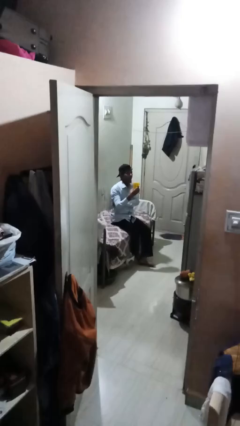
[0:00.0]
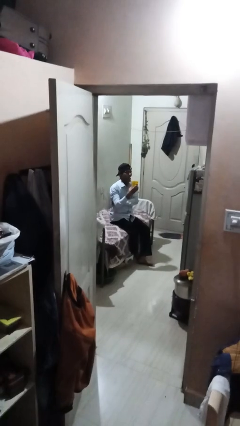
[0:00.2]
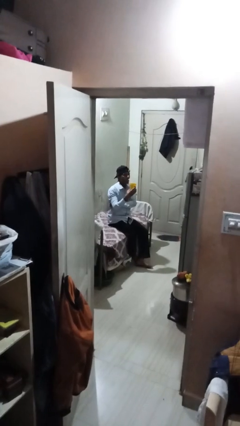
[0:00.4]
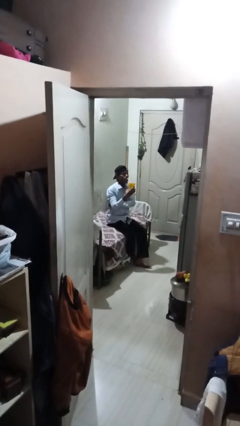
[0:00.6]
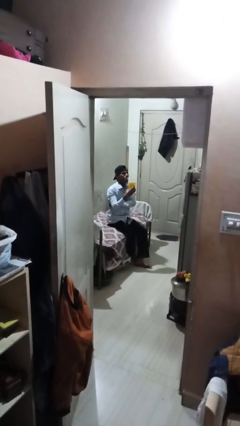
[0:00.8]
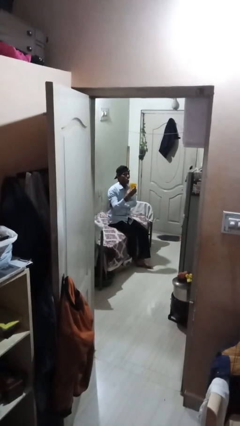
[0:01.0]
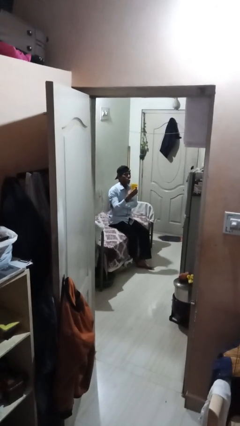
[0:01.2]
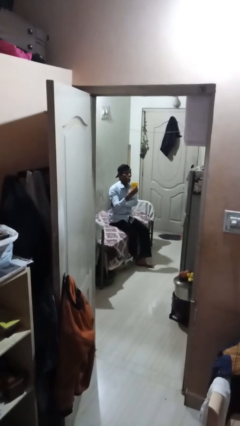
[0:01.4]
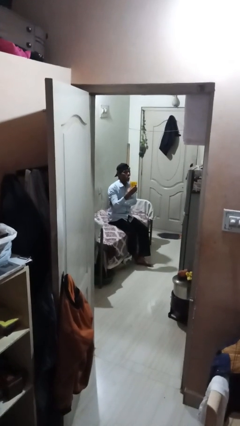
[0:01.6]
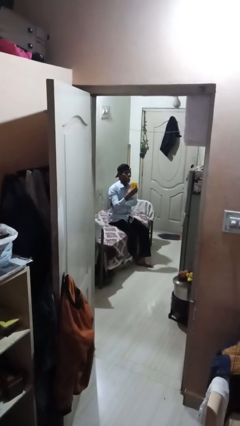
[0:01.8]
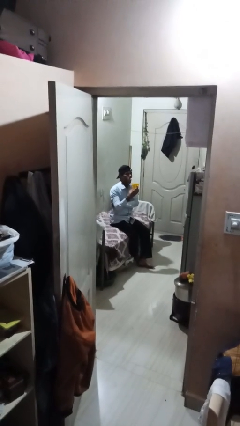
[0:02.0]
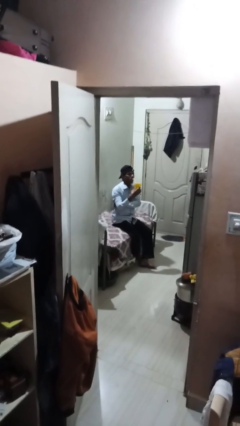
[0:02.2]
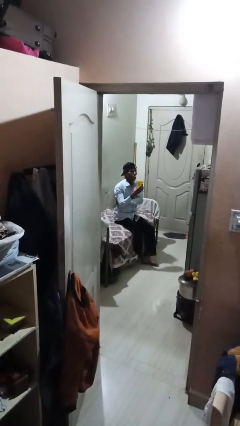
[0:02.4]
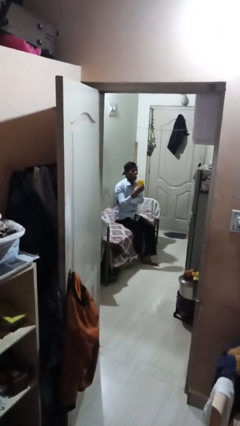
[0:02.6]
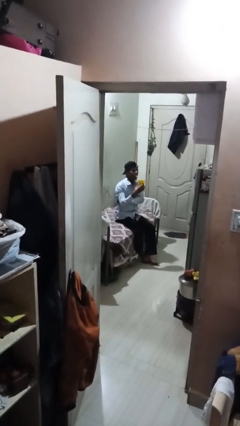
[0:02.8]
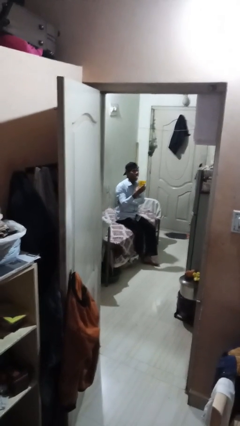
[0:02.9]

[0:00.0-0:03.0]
person drinks from straw

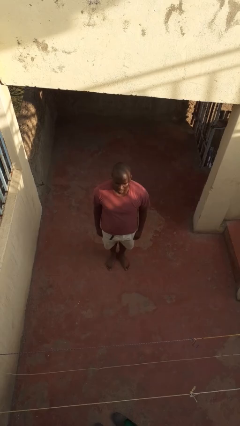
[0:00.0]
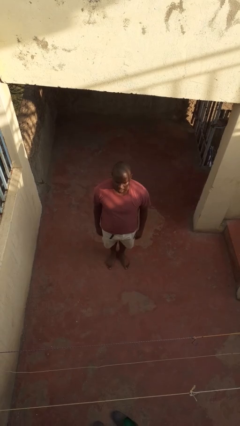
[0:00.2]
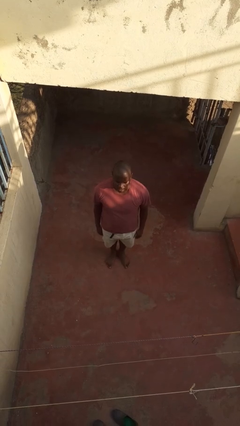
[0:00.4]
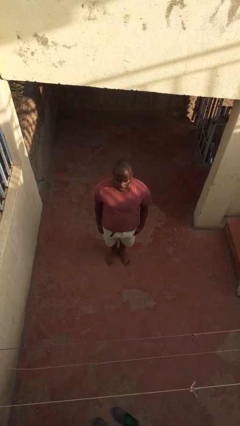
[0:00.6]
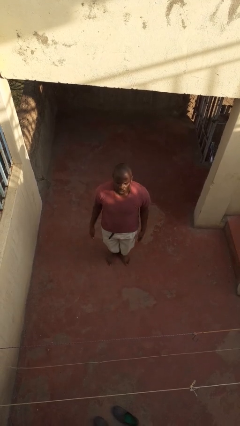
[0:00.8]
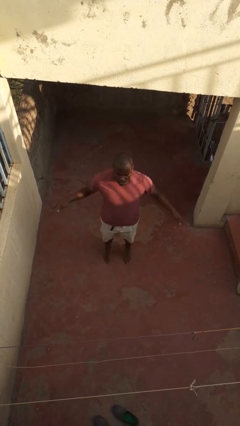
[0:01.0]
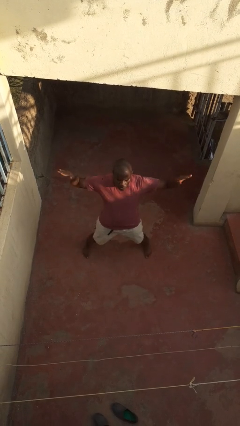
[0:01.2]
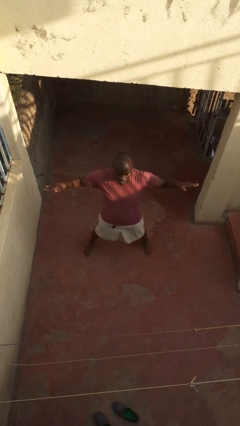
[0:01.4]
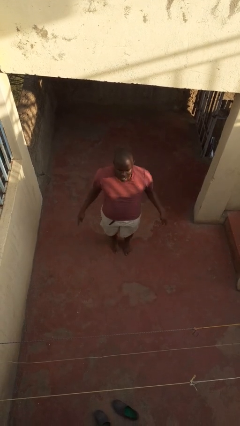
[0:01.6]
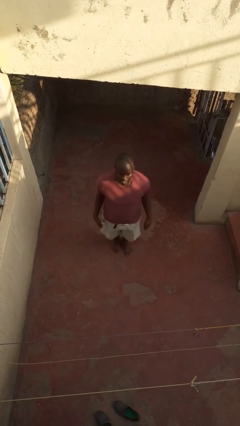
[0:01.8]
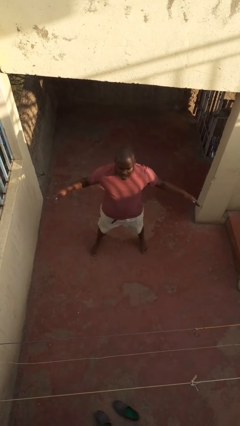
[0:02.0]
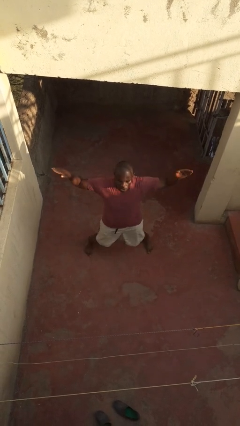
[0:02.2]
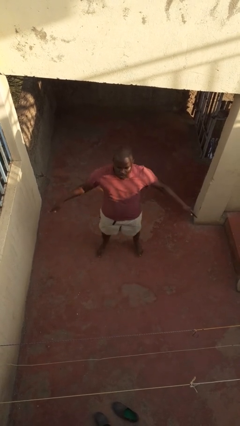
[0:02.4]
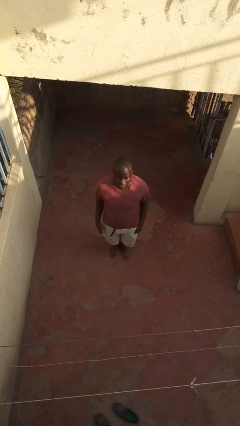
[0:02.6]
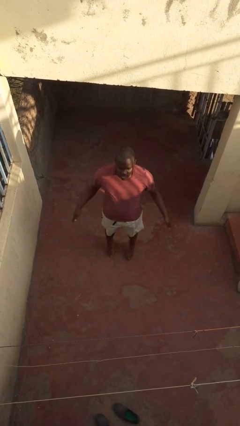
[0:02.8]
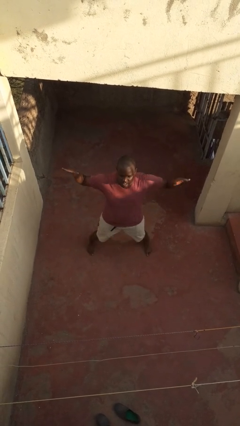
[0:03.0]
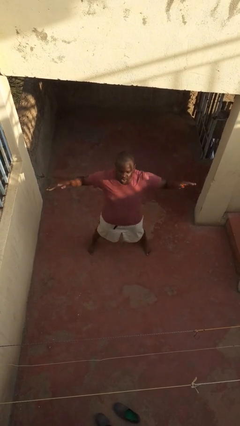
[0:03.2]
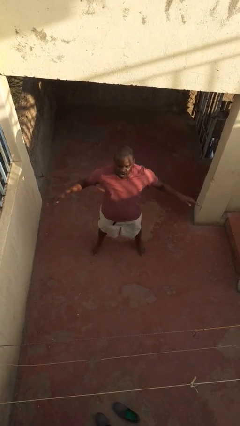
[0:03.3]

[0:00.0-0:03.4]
person exercises with jumping jacks

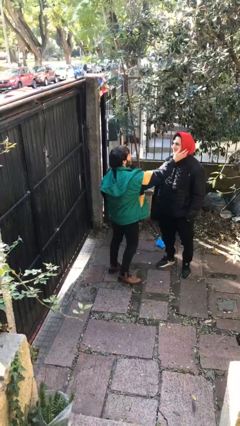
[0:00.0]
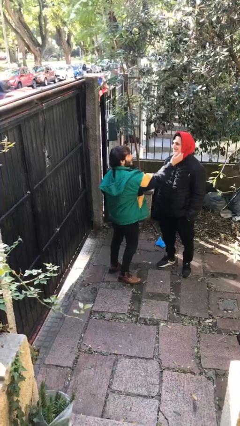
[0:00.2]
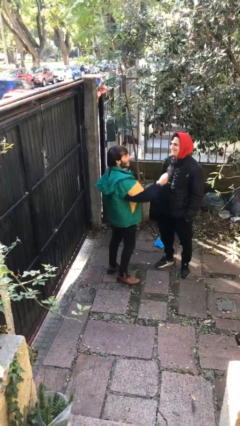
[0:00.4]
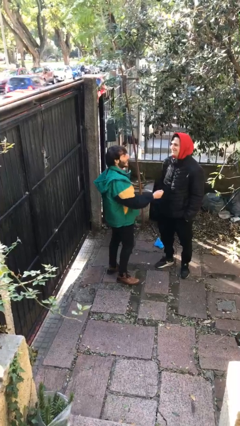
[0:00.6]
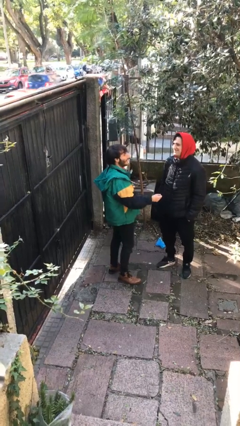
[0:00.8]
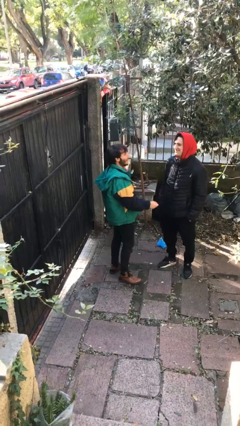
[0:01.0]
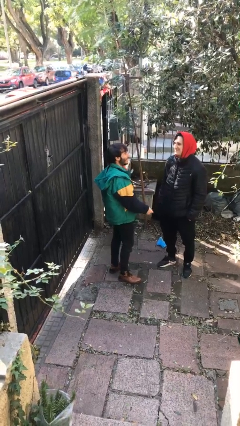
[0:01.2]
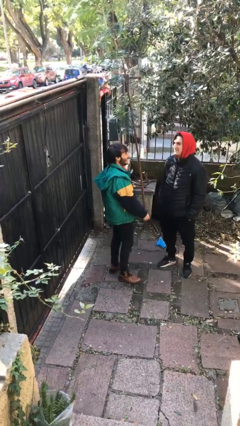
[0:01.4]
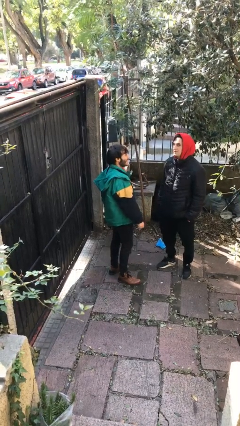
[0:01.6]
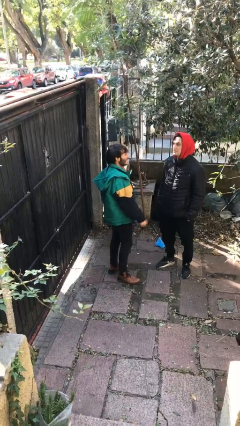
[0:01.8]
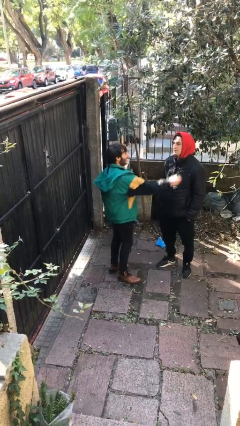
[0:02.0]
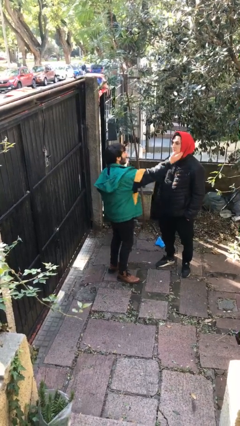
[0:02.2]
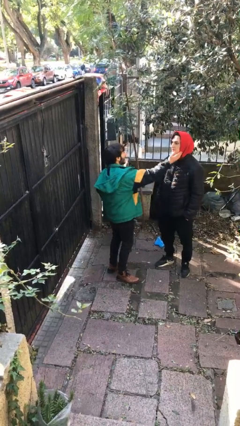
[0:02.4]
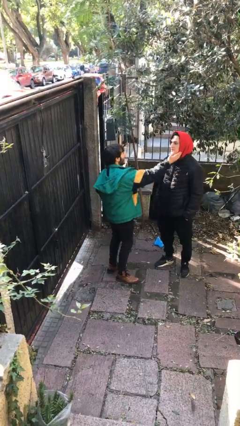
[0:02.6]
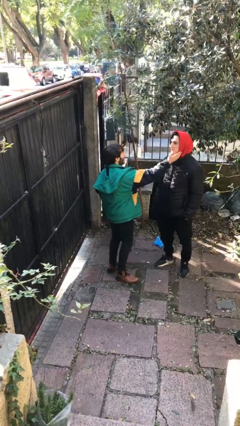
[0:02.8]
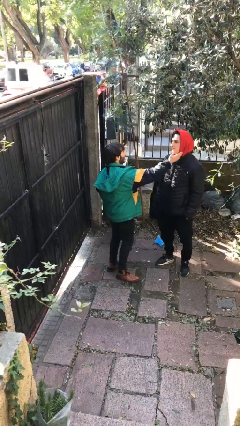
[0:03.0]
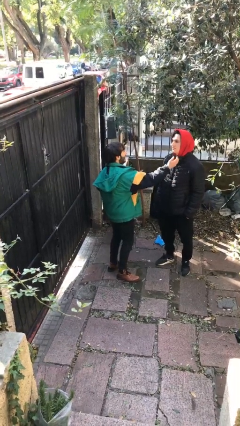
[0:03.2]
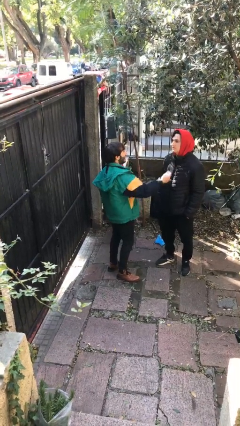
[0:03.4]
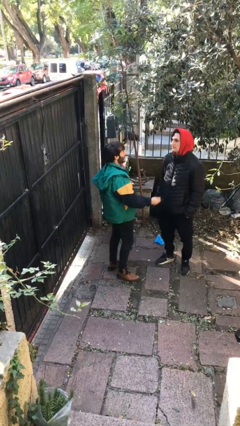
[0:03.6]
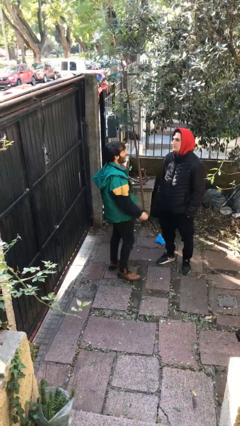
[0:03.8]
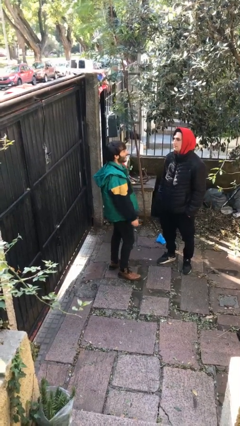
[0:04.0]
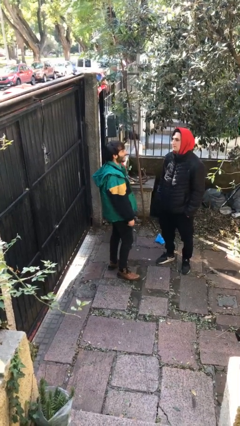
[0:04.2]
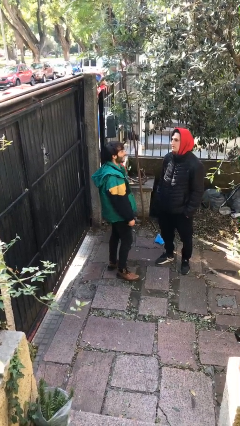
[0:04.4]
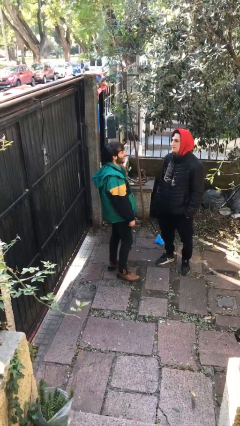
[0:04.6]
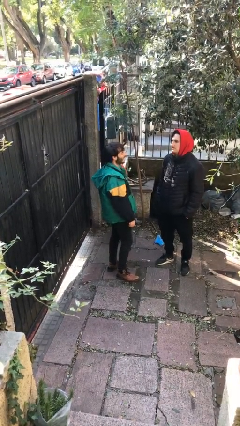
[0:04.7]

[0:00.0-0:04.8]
person touches face of person

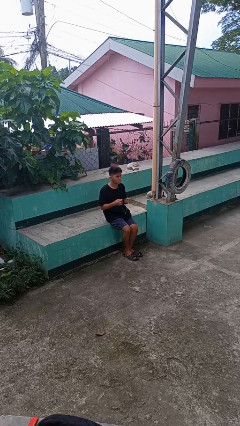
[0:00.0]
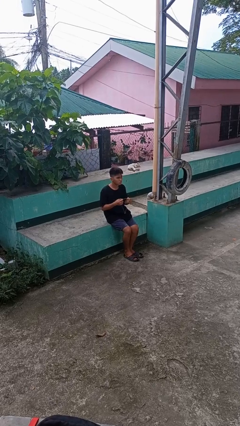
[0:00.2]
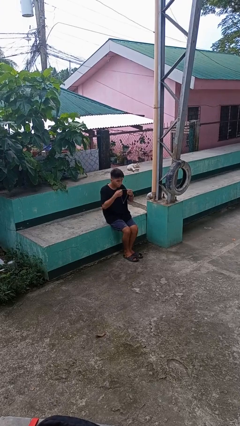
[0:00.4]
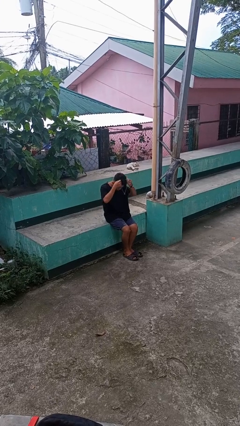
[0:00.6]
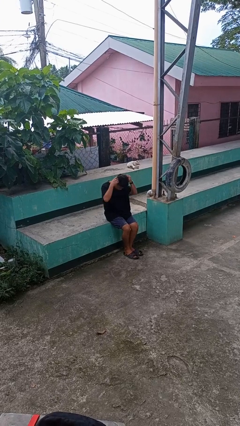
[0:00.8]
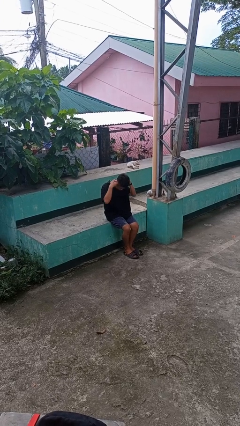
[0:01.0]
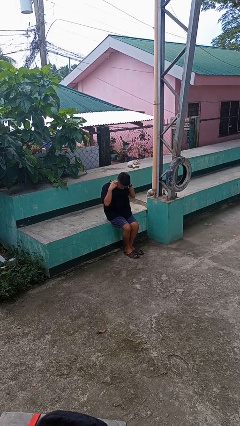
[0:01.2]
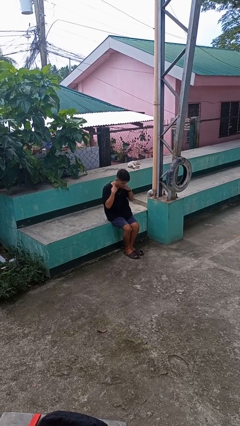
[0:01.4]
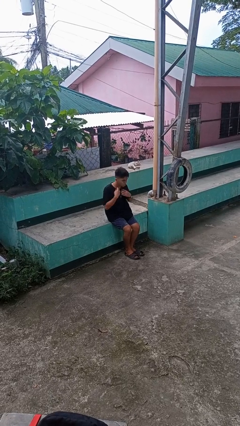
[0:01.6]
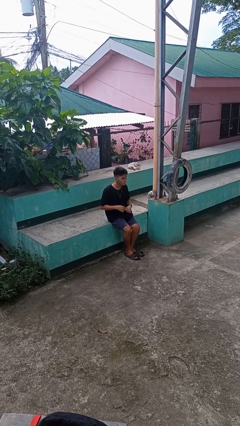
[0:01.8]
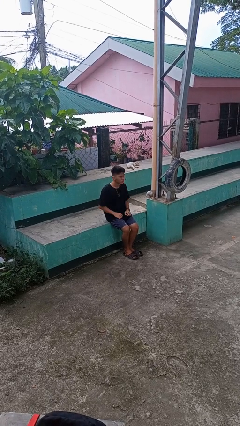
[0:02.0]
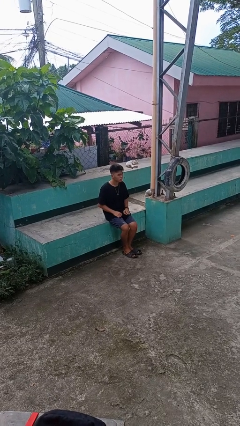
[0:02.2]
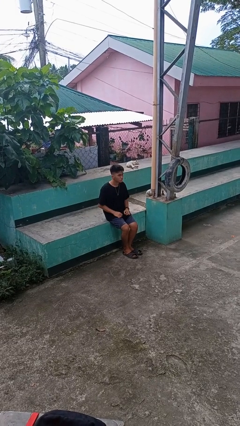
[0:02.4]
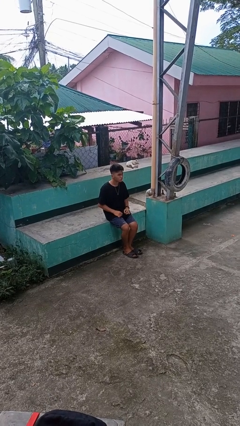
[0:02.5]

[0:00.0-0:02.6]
person puts on necklace

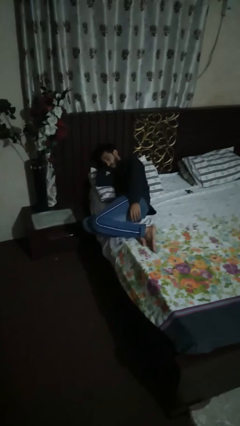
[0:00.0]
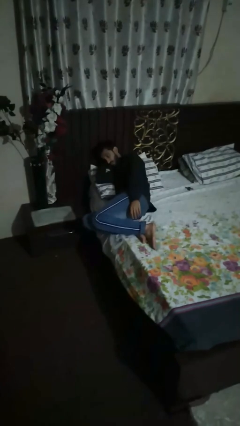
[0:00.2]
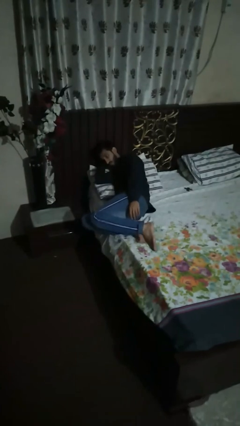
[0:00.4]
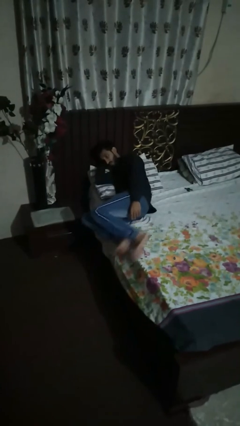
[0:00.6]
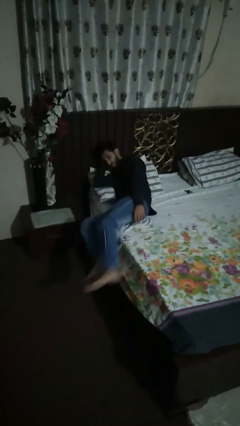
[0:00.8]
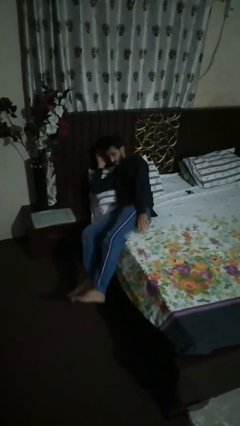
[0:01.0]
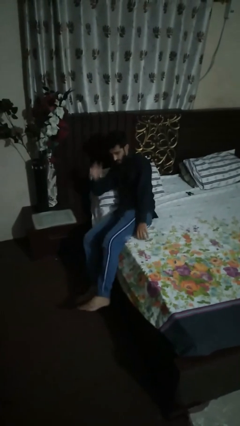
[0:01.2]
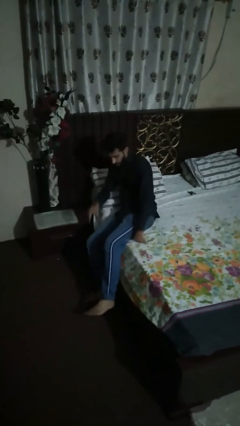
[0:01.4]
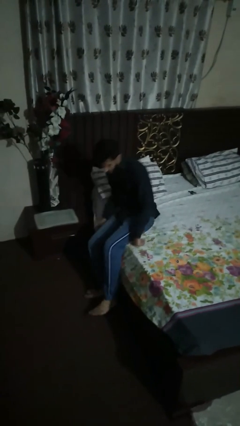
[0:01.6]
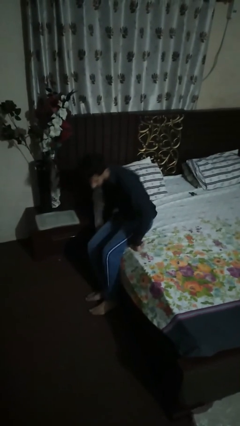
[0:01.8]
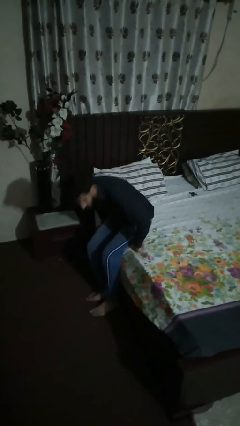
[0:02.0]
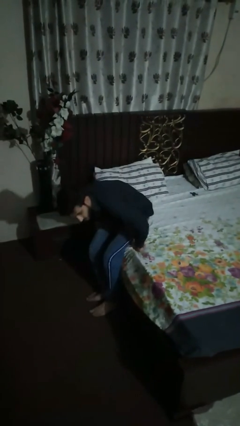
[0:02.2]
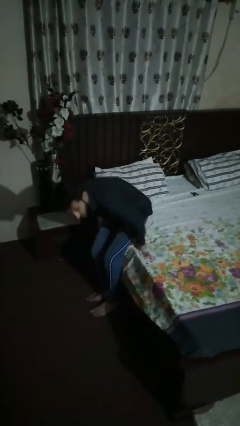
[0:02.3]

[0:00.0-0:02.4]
person stands up

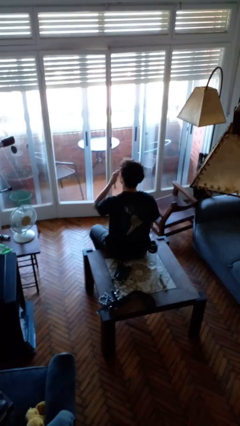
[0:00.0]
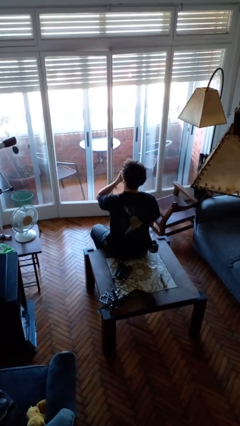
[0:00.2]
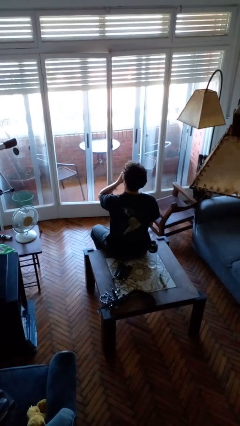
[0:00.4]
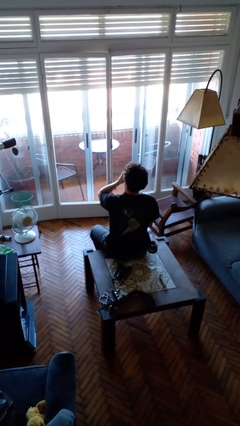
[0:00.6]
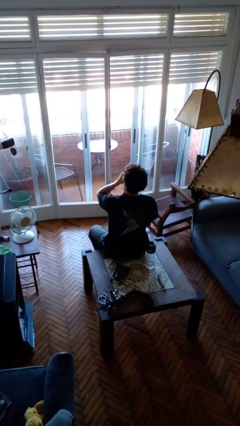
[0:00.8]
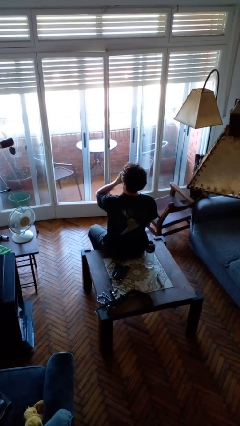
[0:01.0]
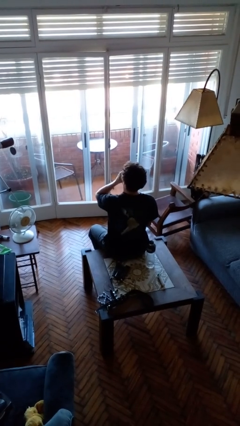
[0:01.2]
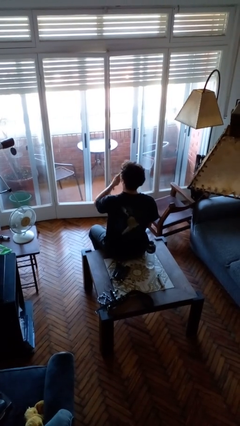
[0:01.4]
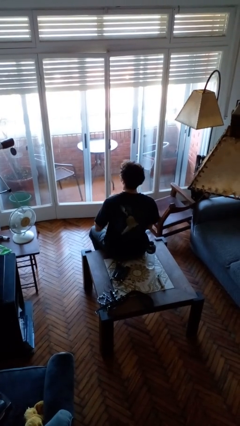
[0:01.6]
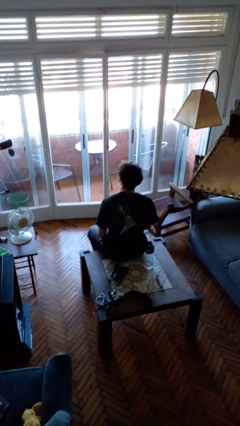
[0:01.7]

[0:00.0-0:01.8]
person yawns
